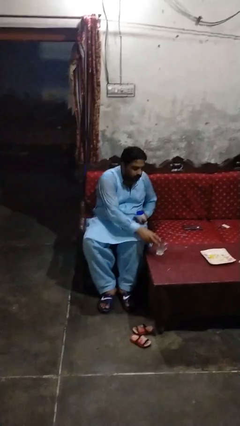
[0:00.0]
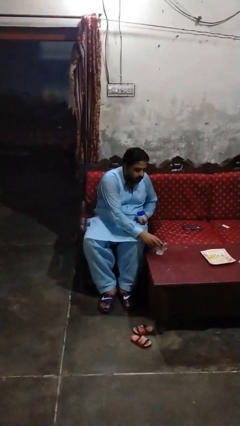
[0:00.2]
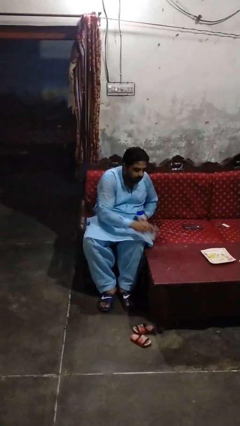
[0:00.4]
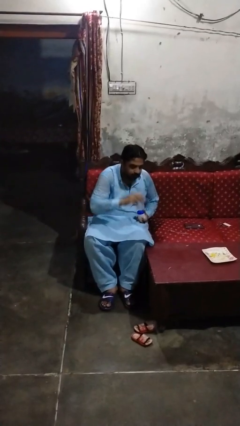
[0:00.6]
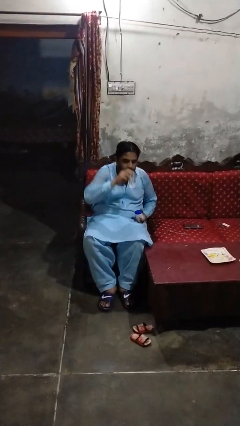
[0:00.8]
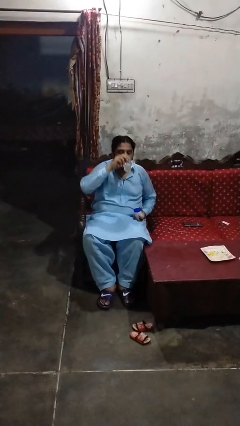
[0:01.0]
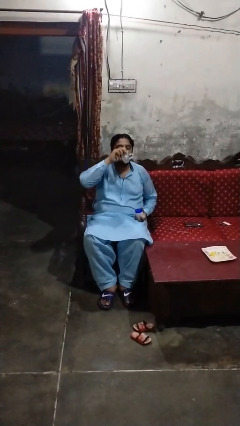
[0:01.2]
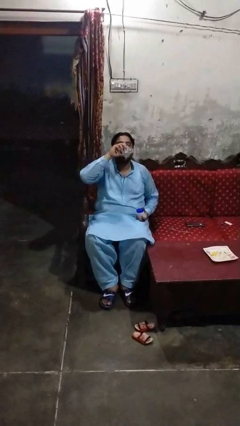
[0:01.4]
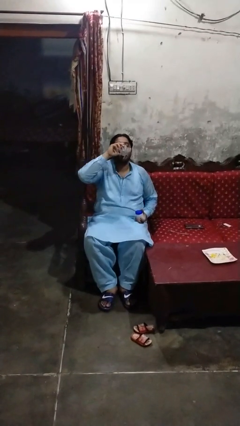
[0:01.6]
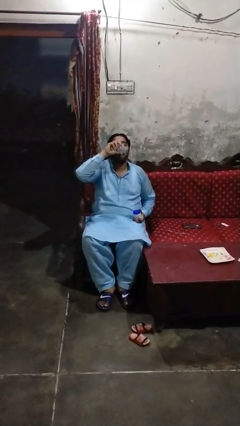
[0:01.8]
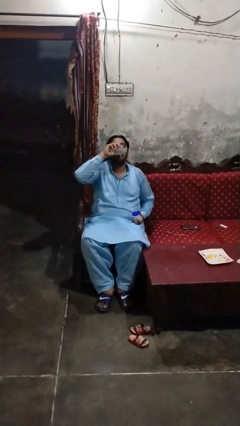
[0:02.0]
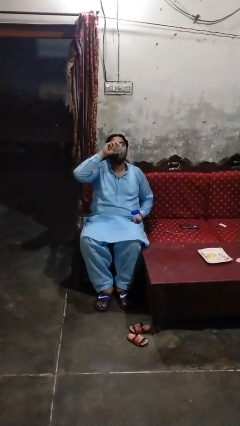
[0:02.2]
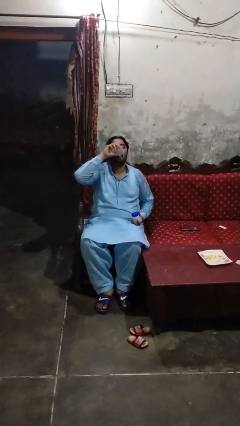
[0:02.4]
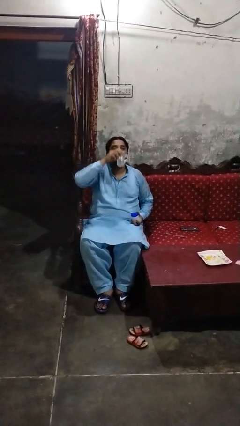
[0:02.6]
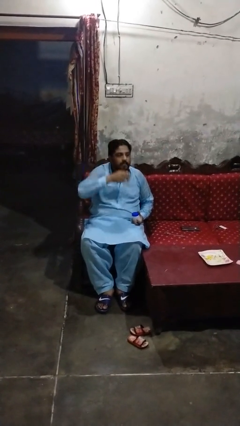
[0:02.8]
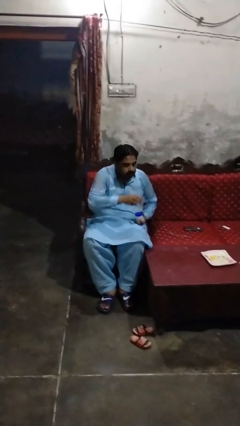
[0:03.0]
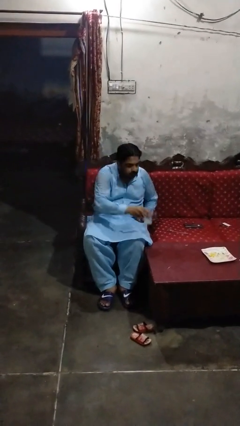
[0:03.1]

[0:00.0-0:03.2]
person drinks from cup

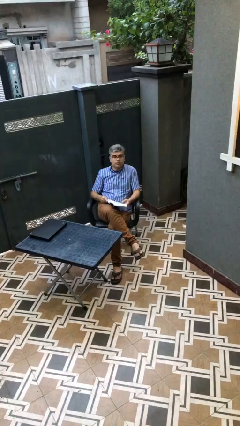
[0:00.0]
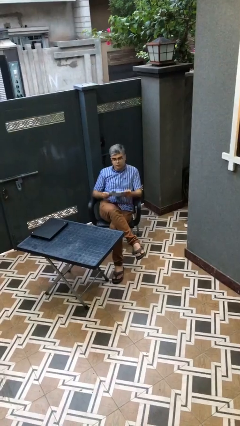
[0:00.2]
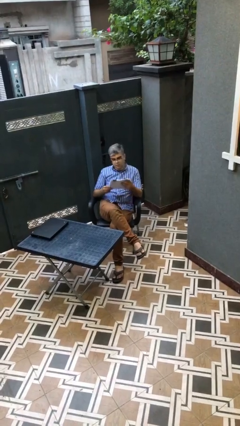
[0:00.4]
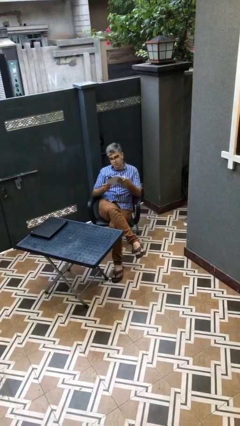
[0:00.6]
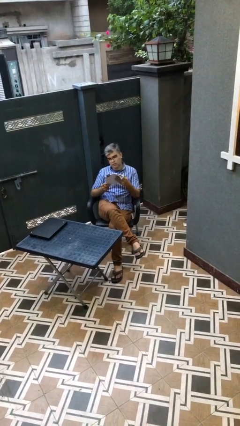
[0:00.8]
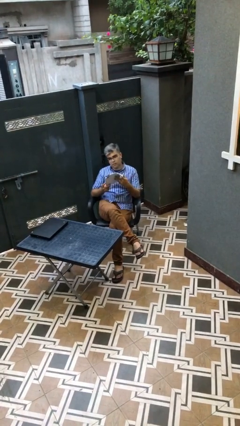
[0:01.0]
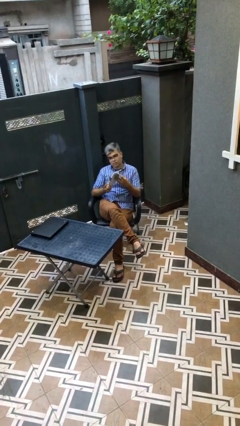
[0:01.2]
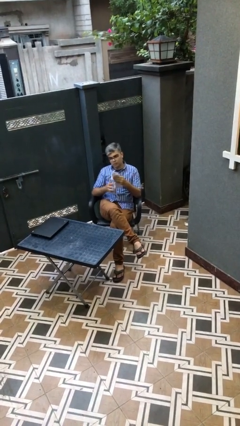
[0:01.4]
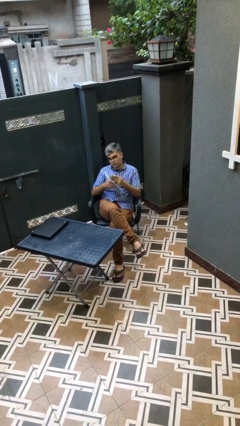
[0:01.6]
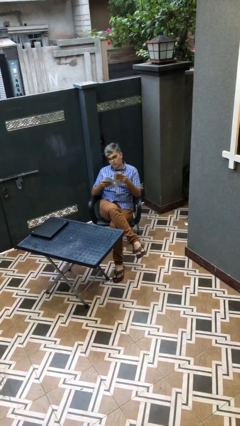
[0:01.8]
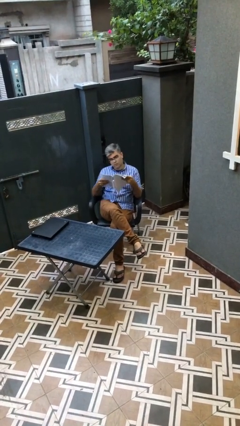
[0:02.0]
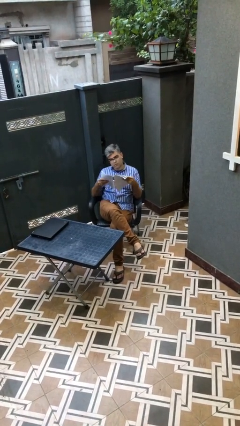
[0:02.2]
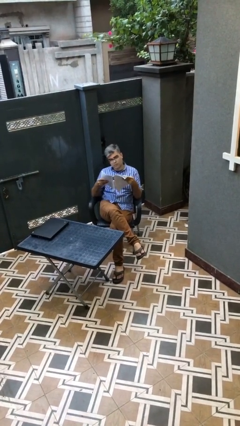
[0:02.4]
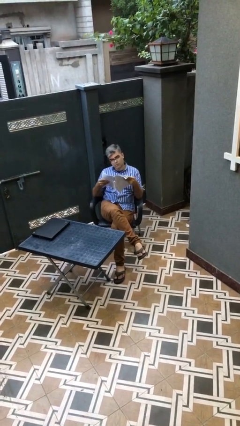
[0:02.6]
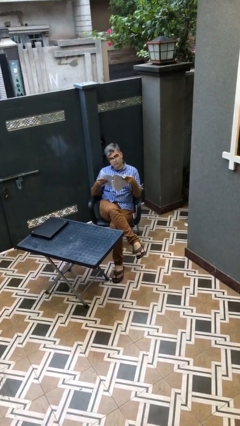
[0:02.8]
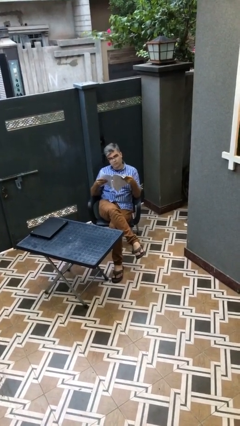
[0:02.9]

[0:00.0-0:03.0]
person reads document

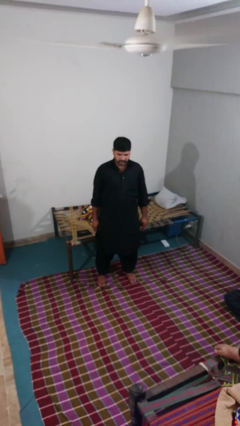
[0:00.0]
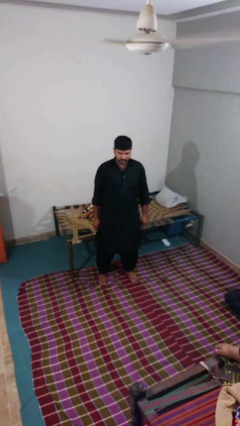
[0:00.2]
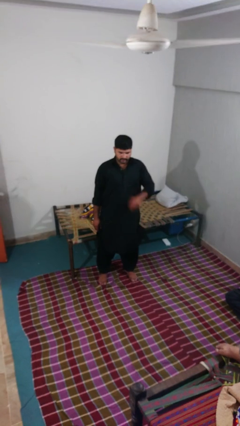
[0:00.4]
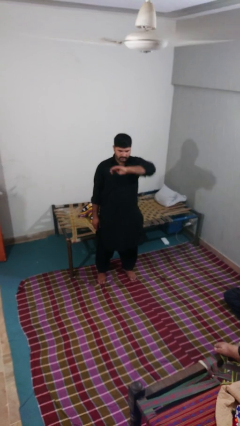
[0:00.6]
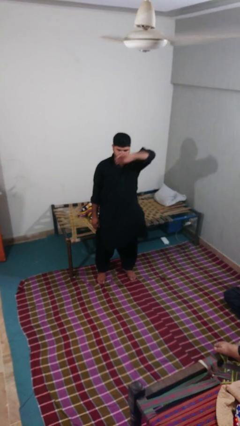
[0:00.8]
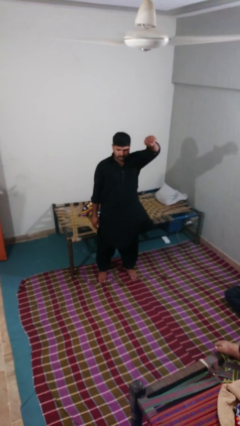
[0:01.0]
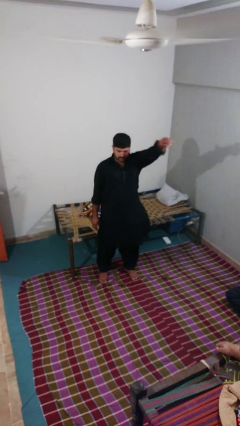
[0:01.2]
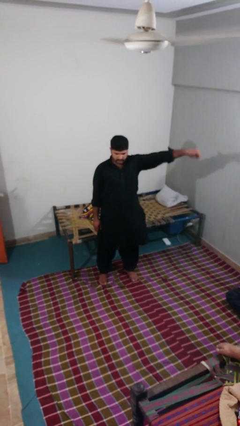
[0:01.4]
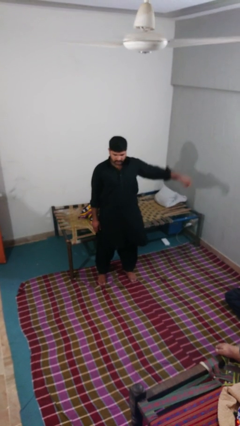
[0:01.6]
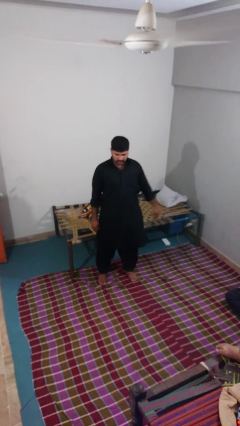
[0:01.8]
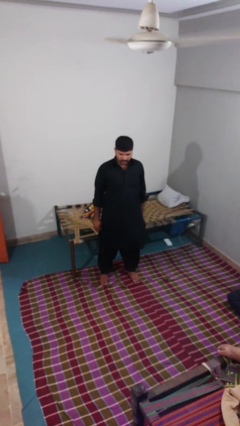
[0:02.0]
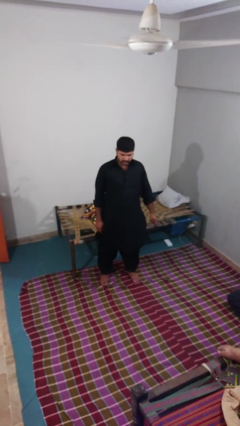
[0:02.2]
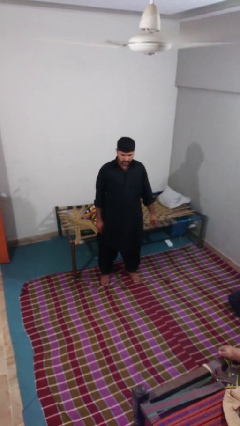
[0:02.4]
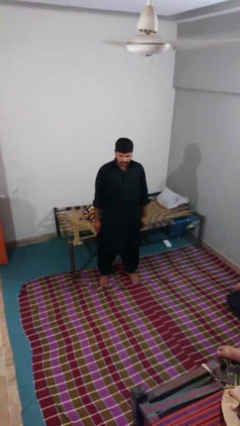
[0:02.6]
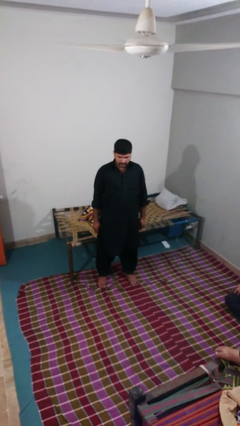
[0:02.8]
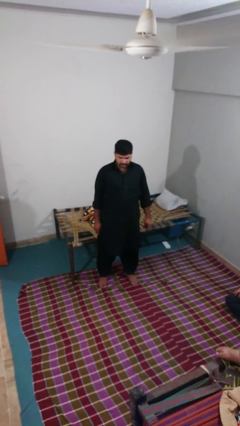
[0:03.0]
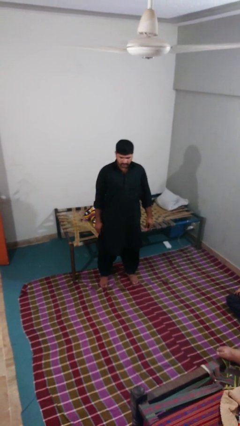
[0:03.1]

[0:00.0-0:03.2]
person gestures swipe left

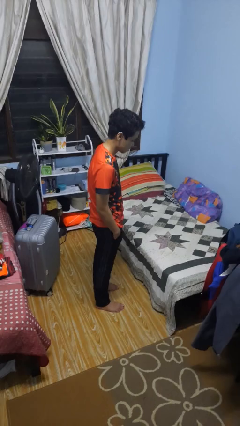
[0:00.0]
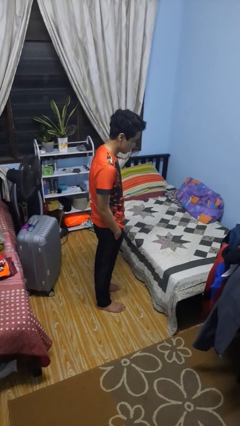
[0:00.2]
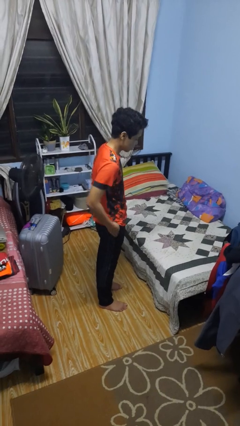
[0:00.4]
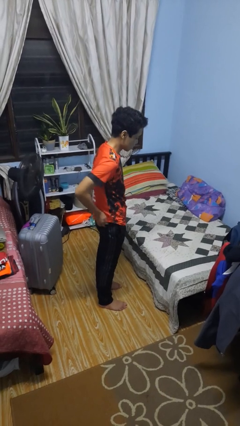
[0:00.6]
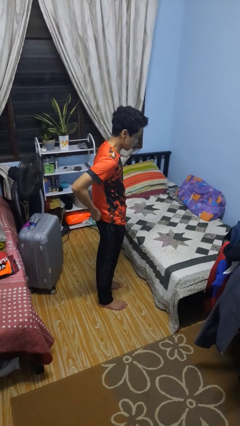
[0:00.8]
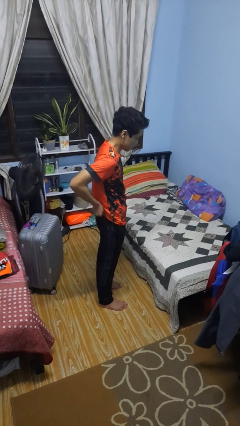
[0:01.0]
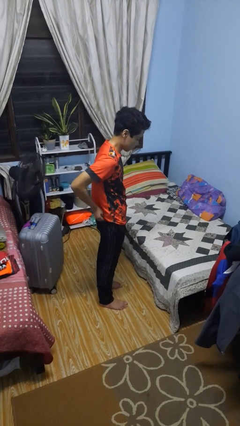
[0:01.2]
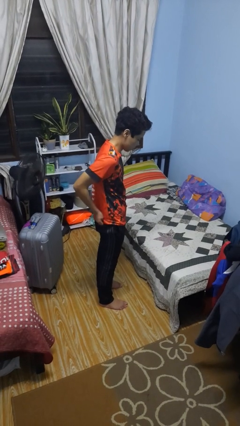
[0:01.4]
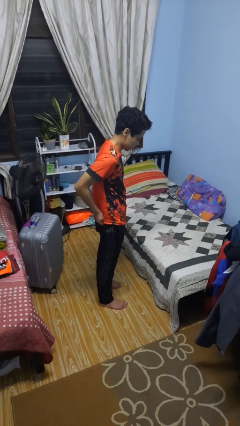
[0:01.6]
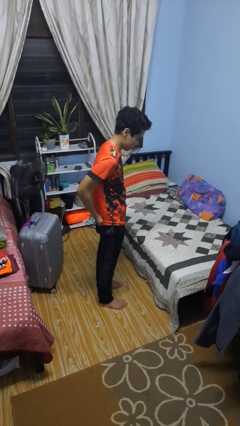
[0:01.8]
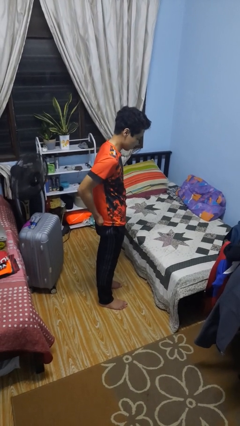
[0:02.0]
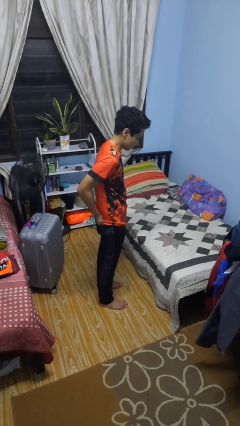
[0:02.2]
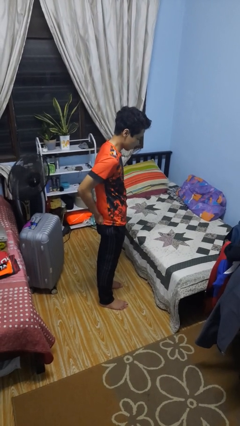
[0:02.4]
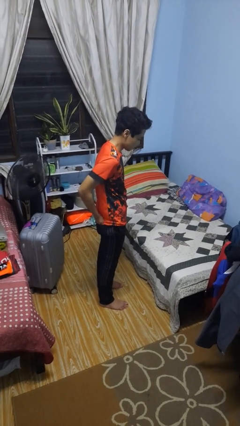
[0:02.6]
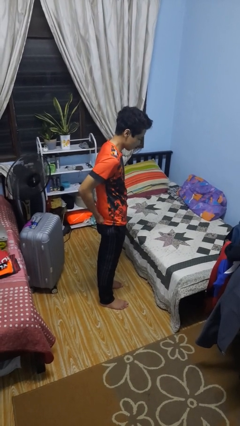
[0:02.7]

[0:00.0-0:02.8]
person puts hands in back pockets

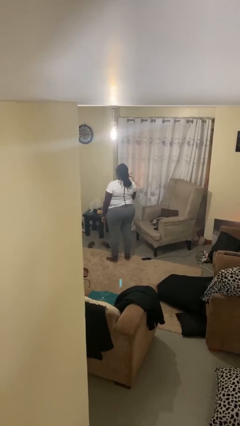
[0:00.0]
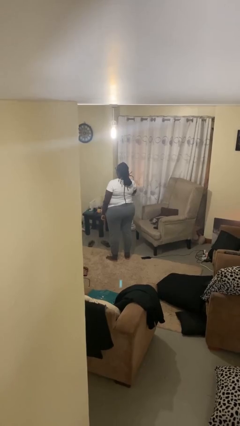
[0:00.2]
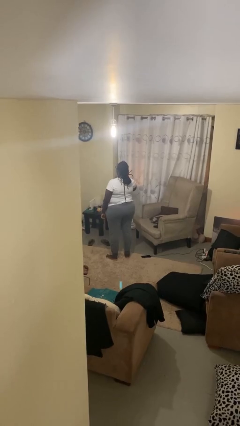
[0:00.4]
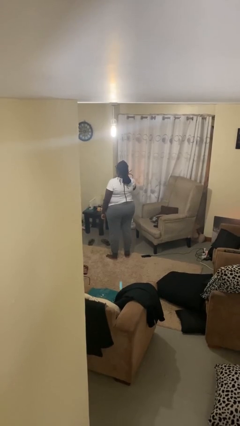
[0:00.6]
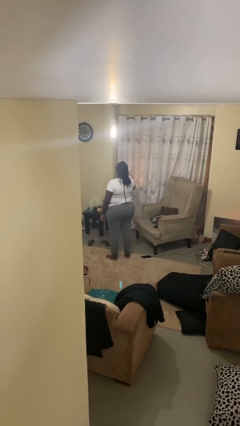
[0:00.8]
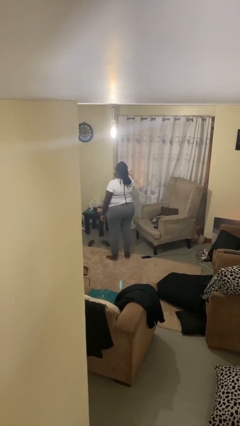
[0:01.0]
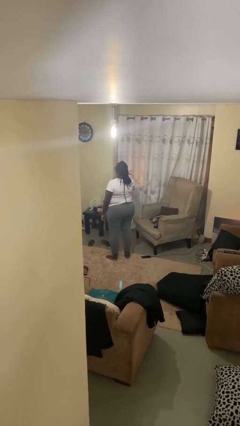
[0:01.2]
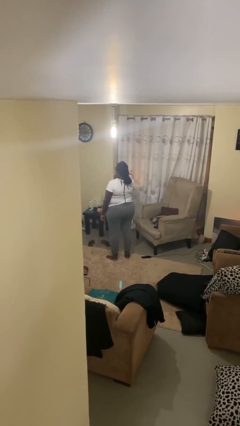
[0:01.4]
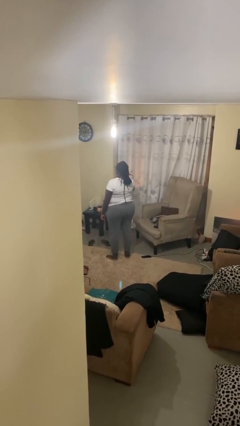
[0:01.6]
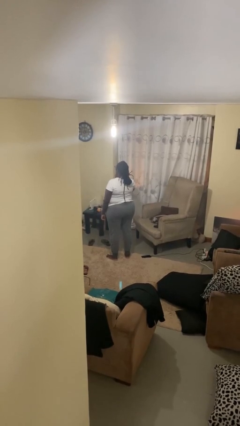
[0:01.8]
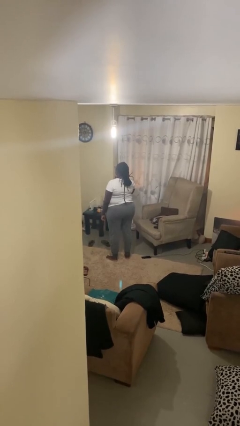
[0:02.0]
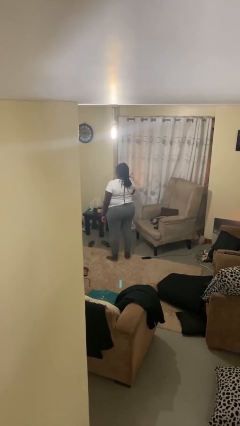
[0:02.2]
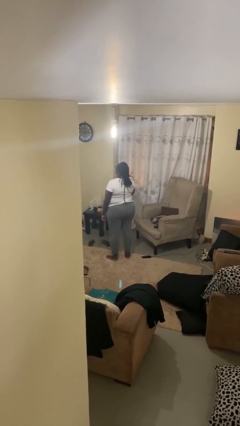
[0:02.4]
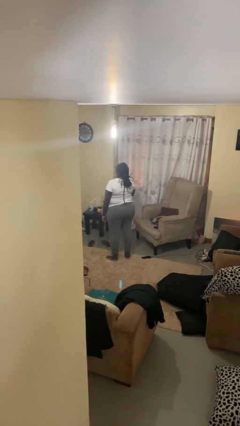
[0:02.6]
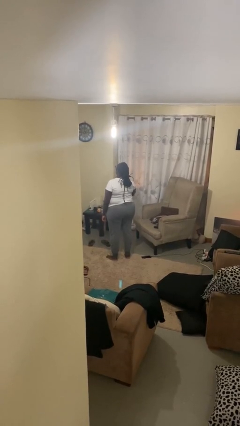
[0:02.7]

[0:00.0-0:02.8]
person drums on chest

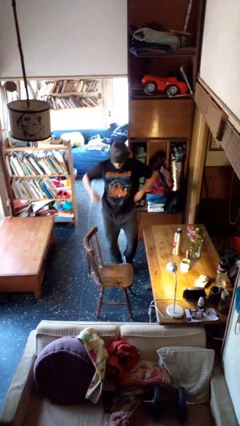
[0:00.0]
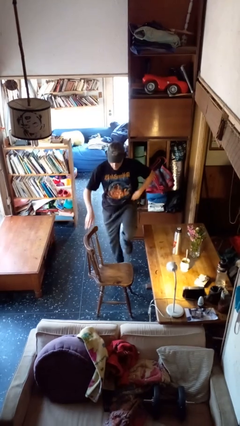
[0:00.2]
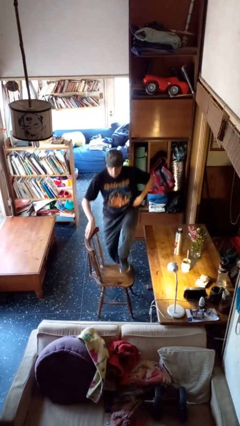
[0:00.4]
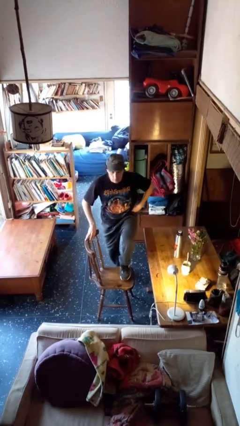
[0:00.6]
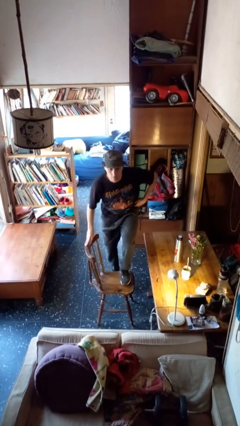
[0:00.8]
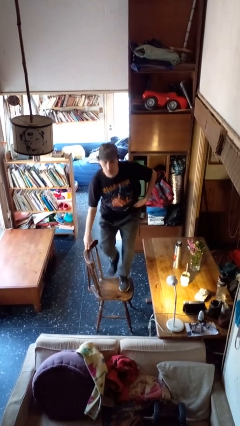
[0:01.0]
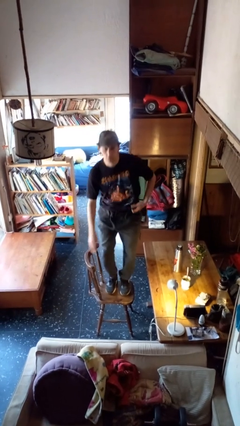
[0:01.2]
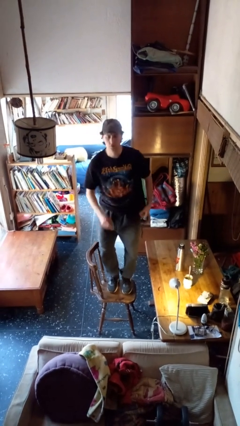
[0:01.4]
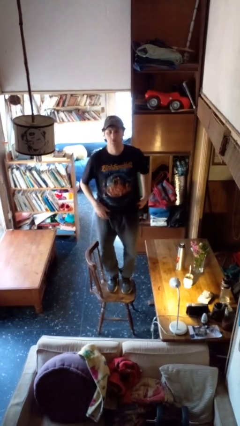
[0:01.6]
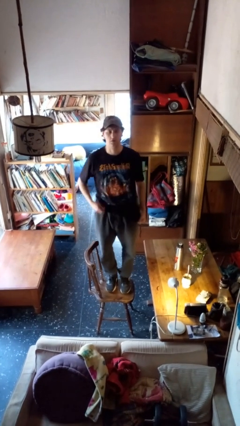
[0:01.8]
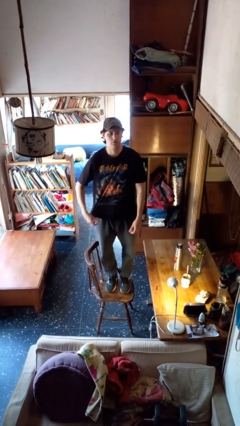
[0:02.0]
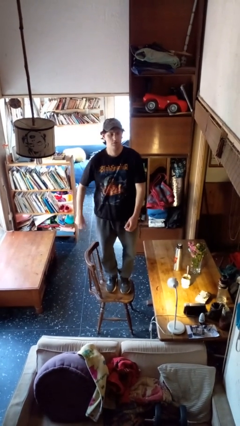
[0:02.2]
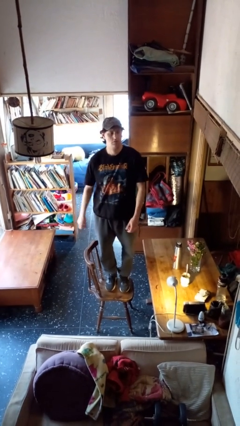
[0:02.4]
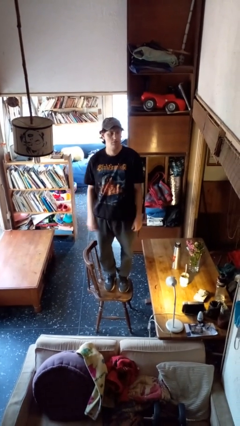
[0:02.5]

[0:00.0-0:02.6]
person climbs on chair
